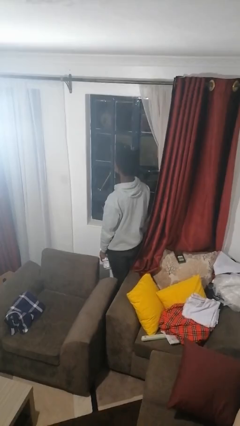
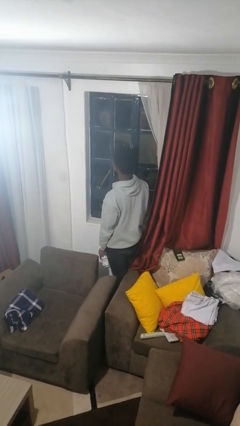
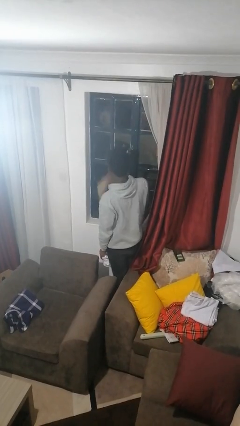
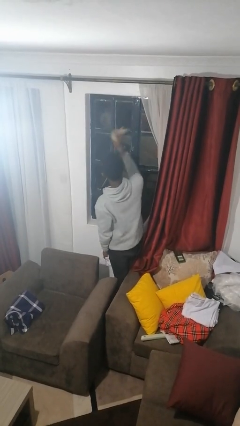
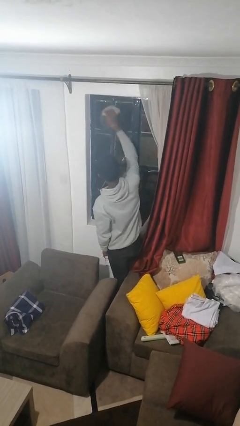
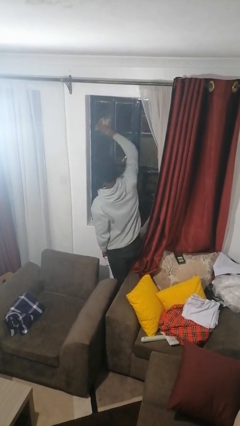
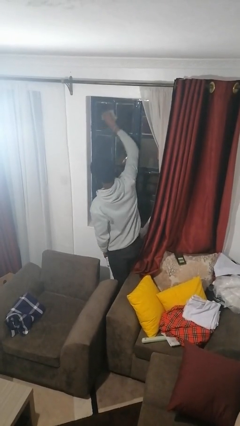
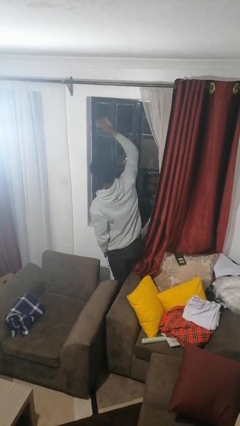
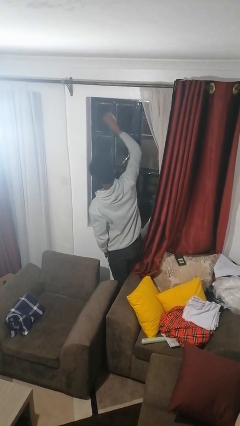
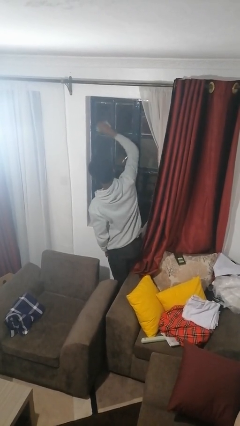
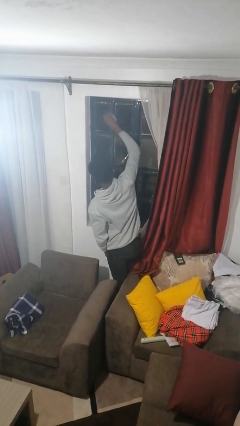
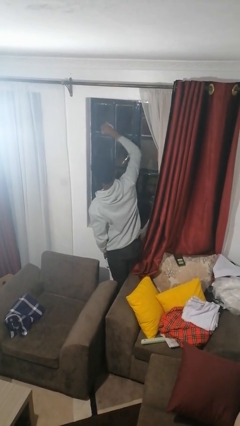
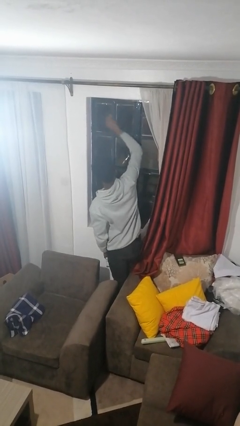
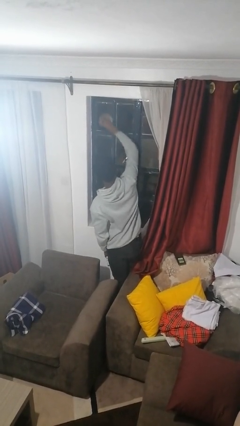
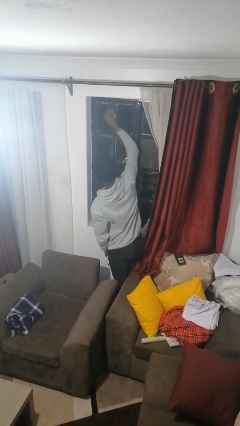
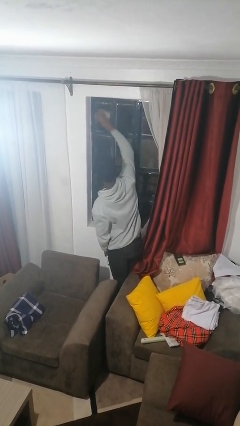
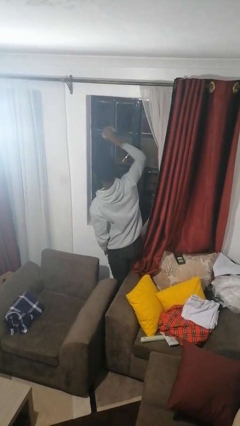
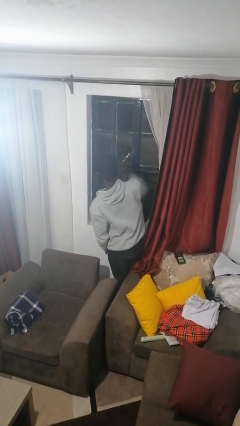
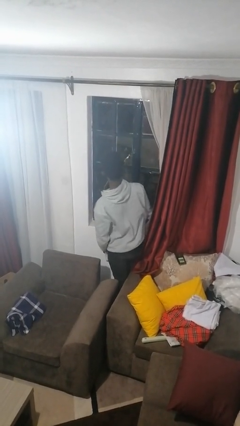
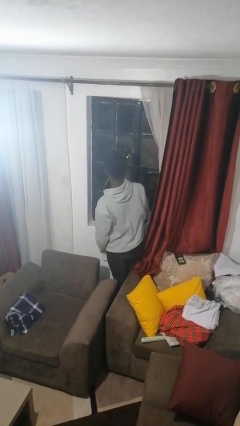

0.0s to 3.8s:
person washes window

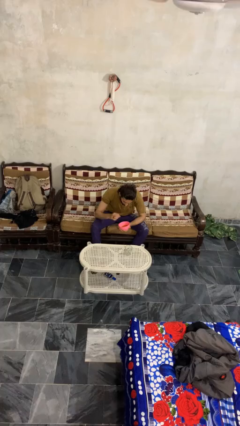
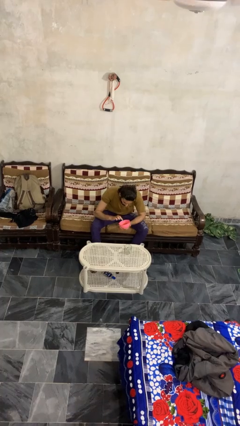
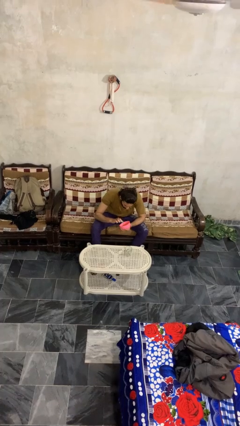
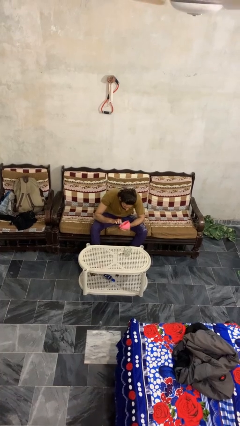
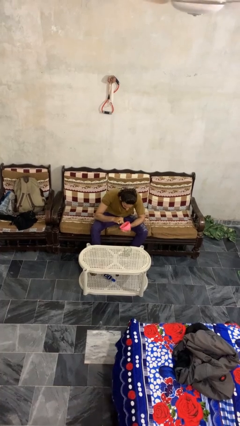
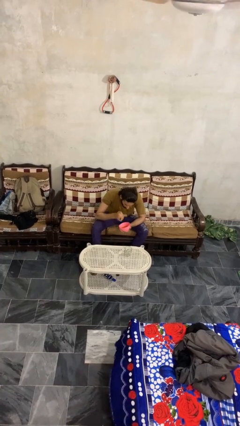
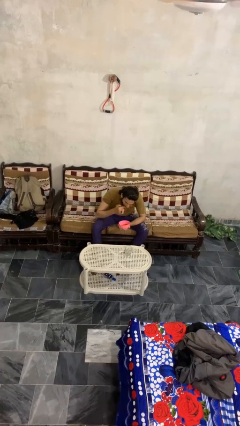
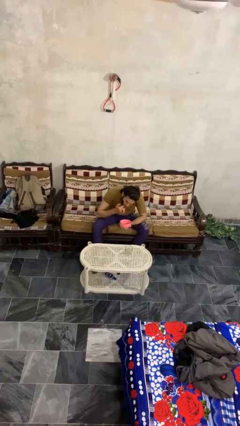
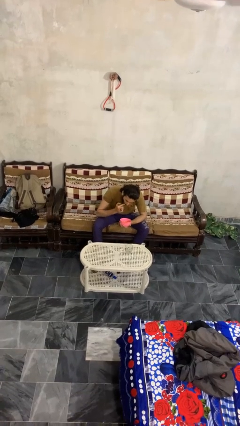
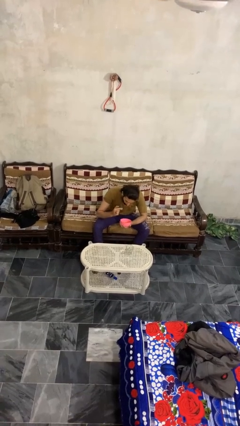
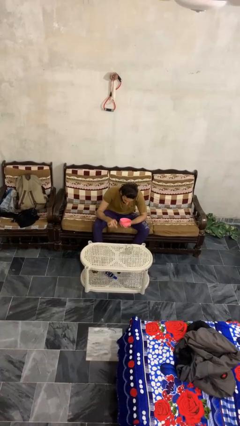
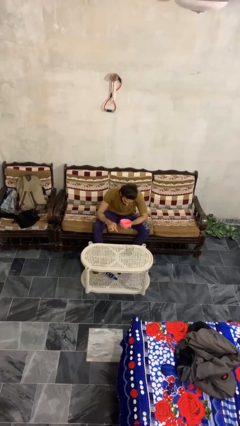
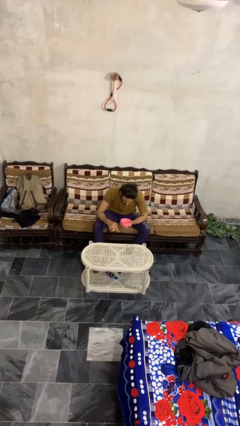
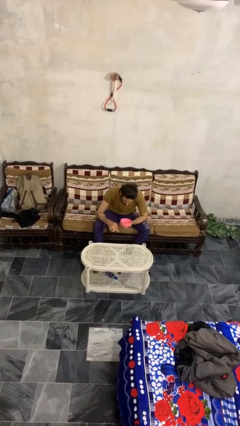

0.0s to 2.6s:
person eats with hands

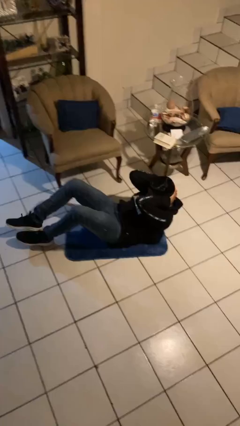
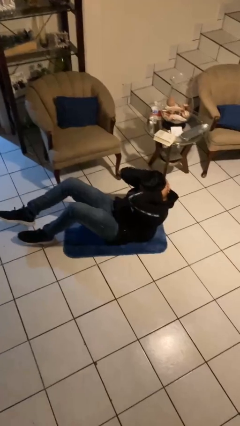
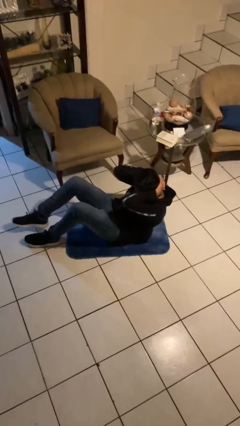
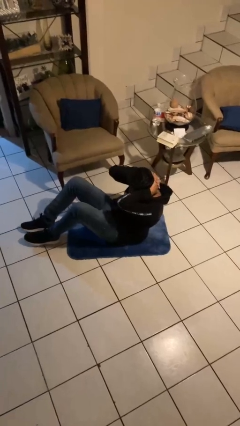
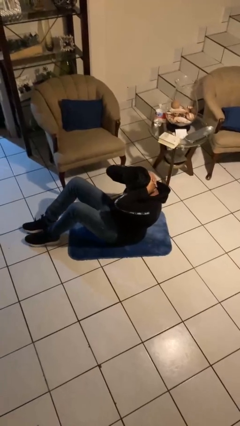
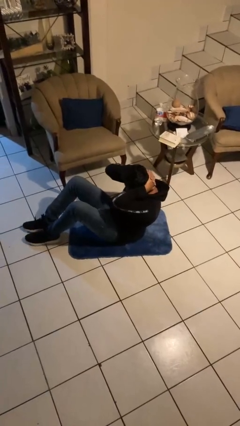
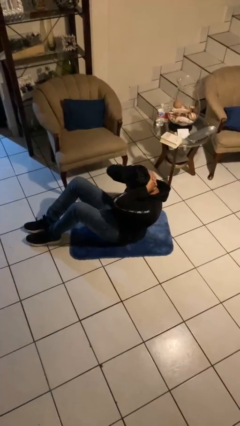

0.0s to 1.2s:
person exercises with situp

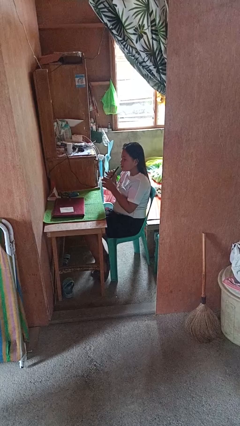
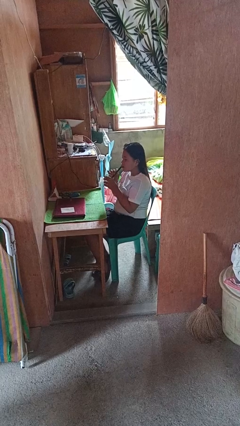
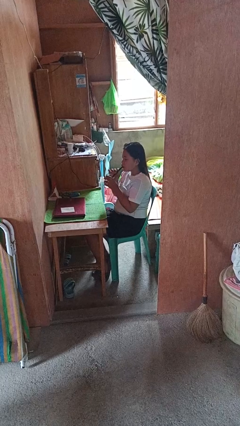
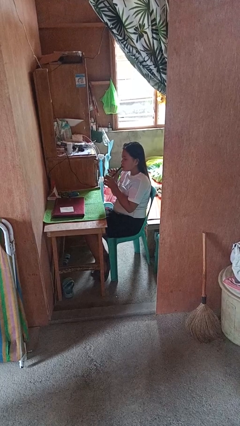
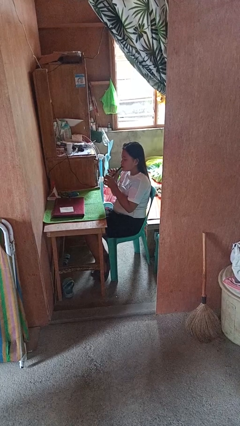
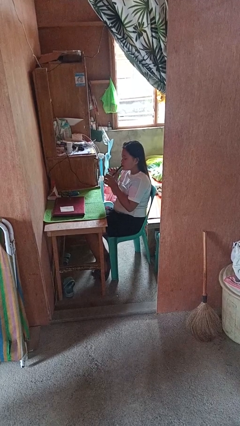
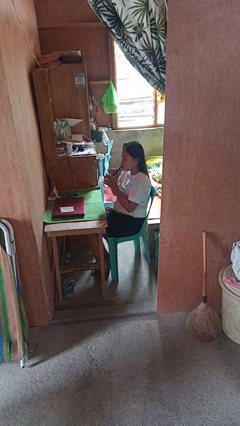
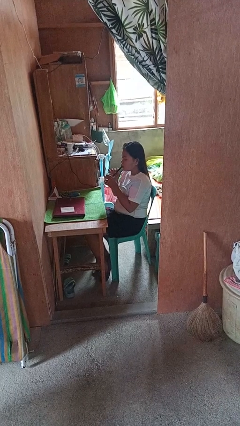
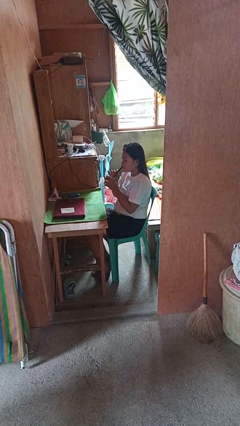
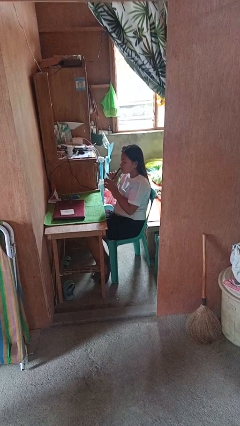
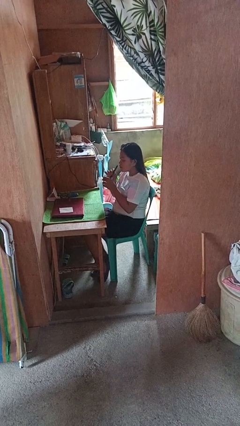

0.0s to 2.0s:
person drinks from straw

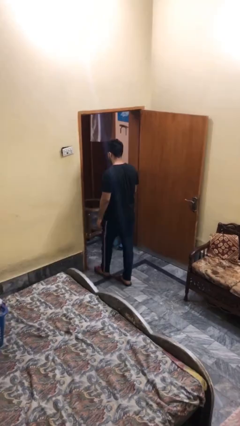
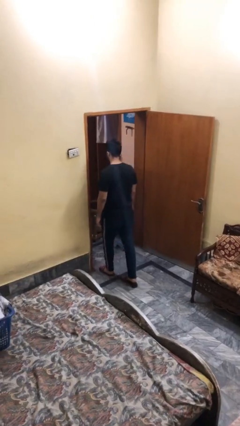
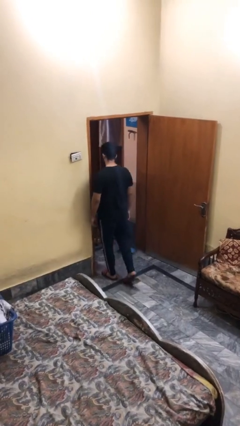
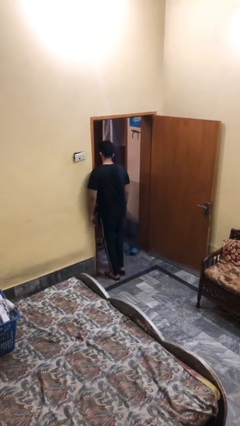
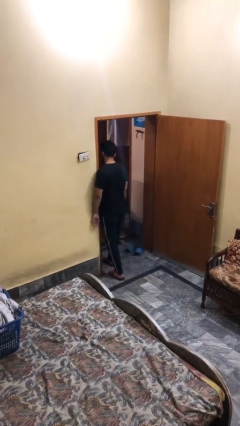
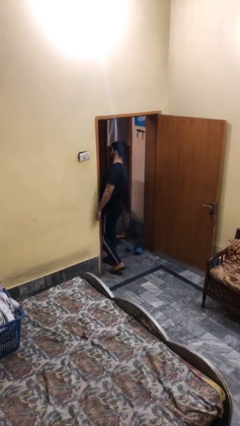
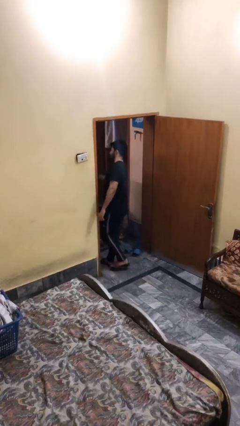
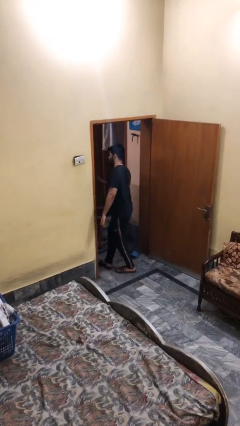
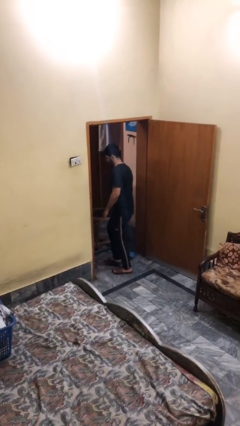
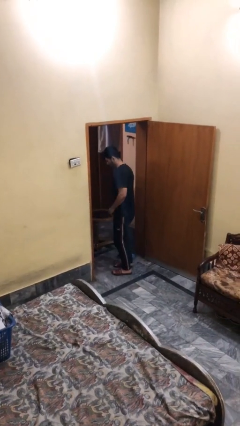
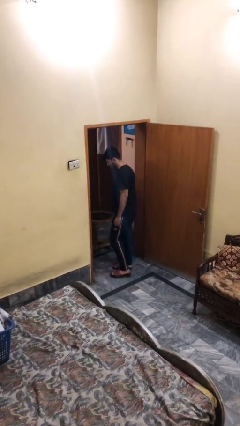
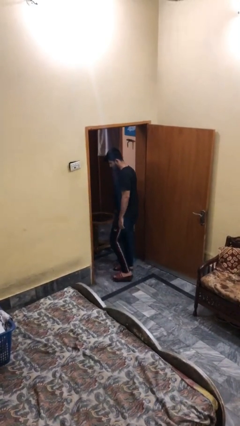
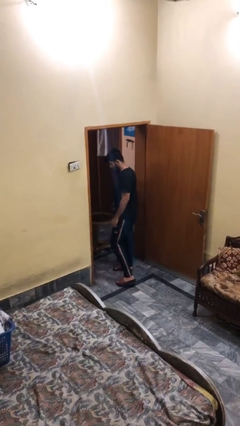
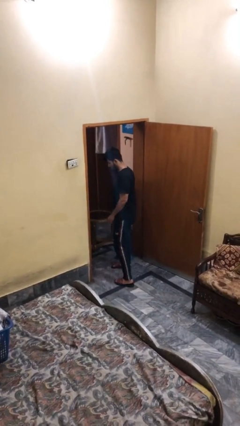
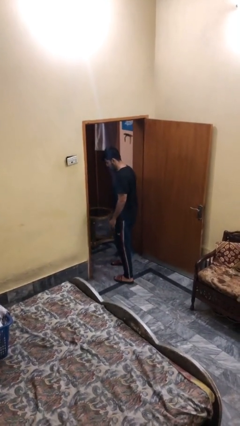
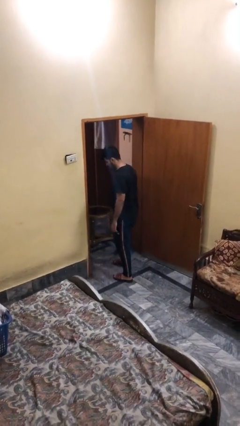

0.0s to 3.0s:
person bumps into wall

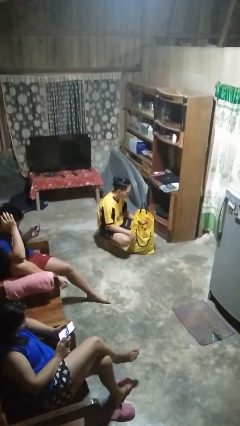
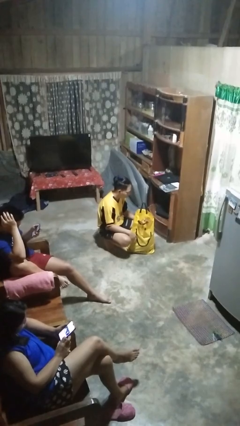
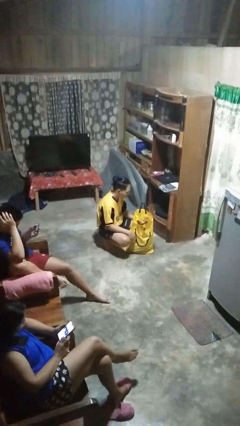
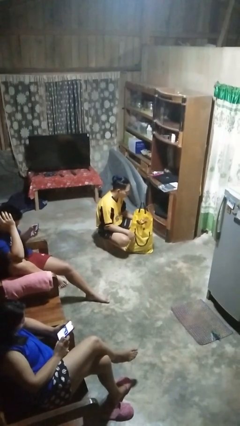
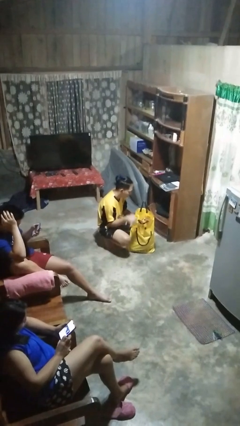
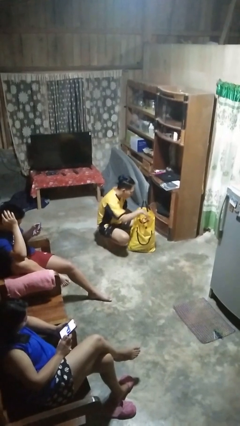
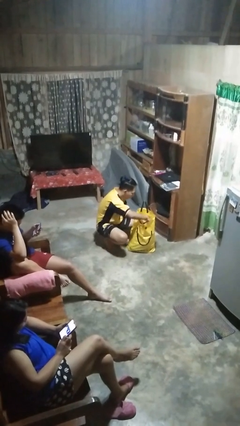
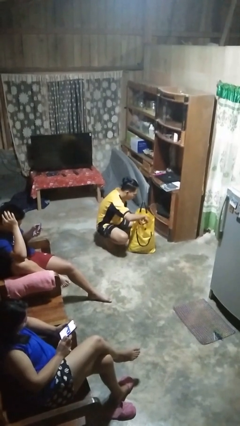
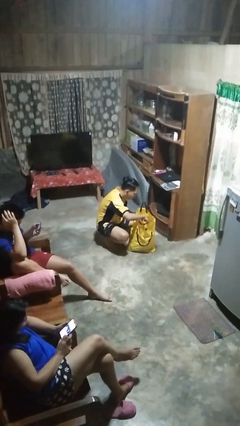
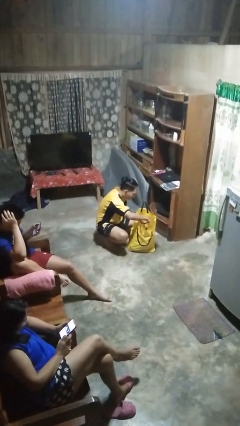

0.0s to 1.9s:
person searches in bag

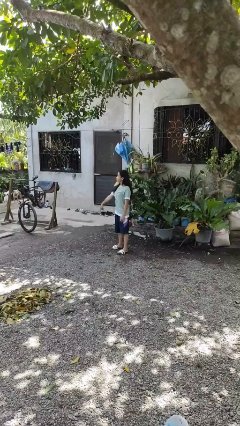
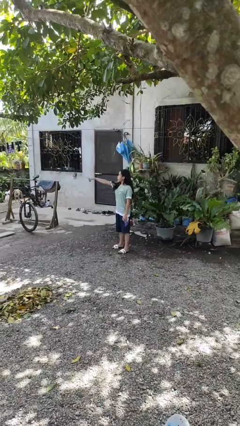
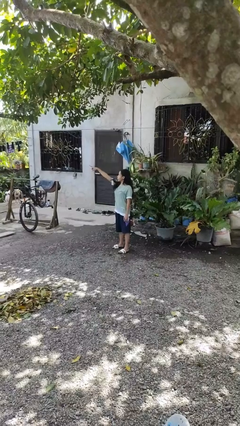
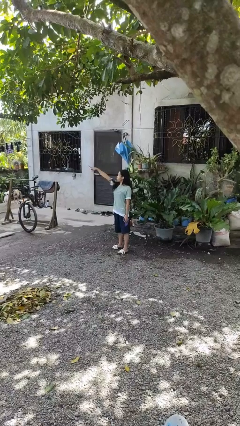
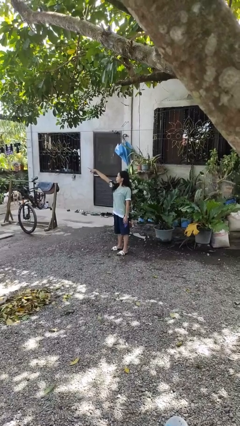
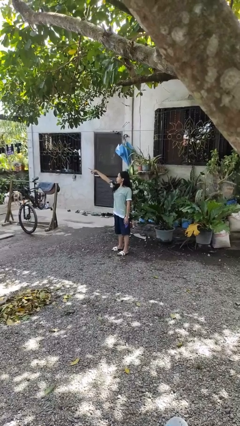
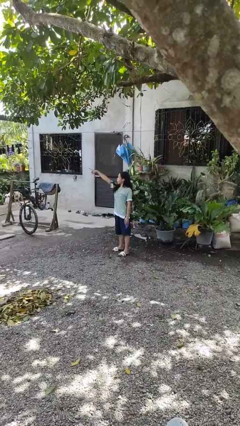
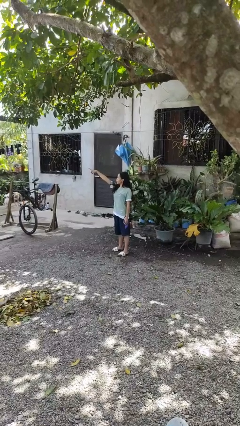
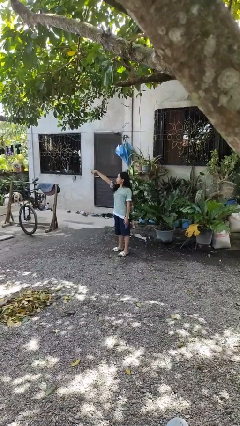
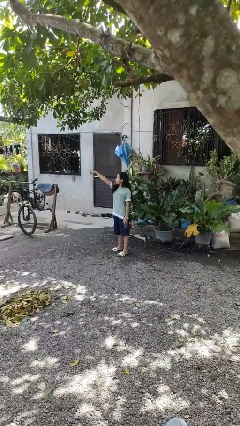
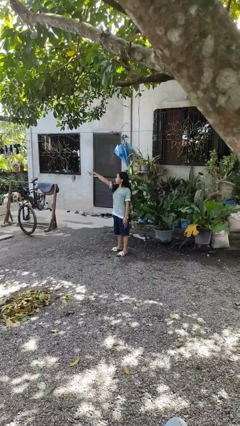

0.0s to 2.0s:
person points at person

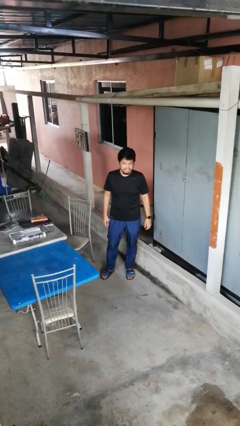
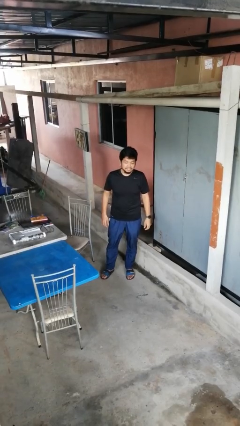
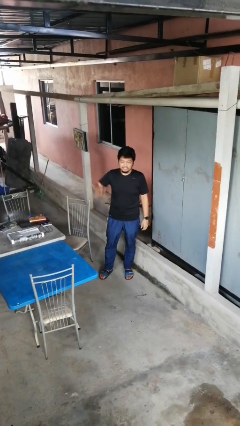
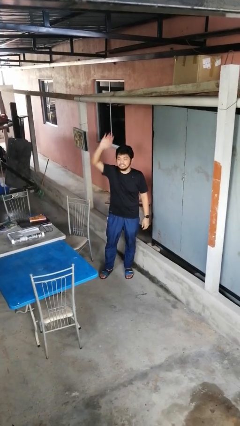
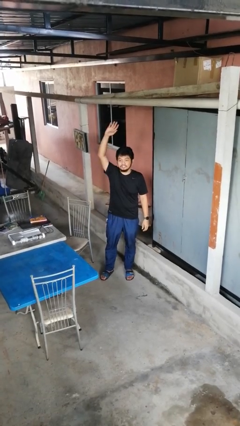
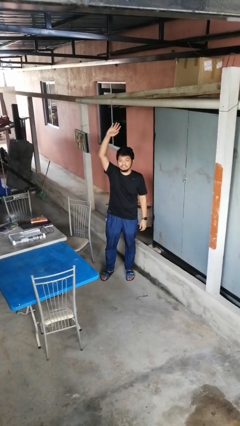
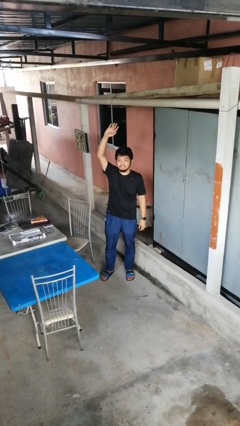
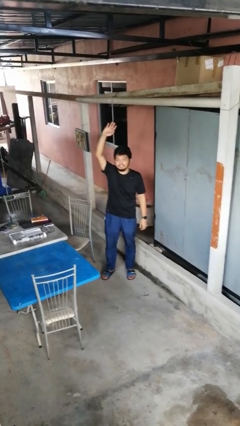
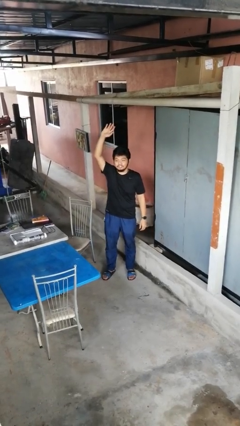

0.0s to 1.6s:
person gestures raise hand
